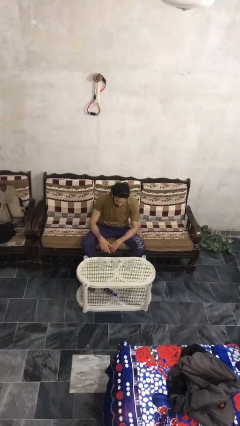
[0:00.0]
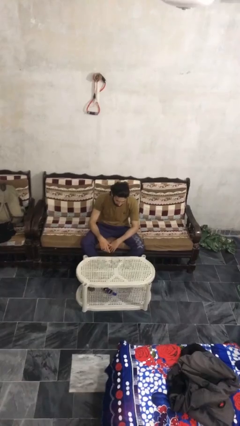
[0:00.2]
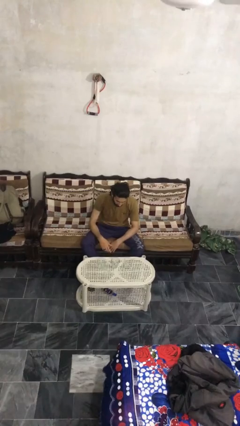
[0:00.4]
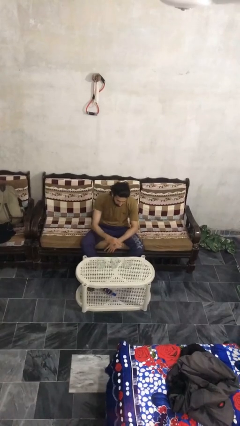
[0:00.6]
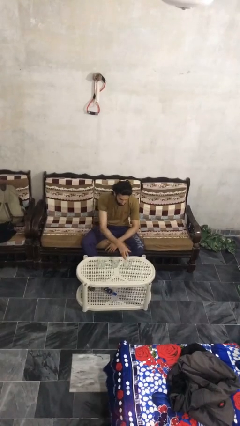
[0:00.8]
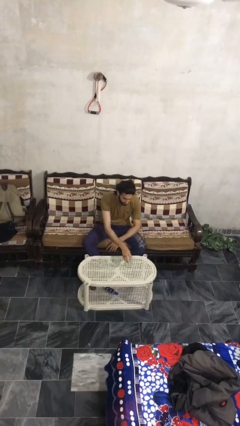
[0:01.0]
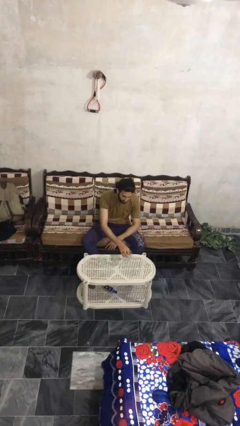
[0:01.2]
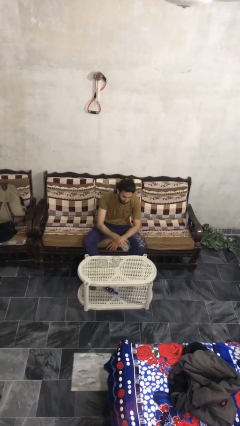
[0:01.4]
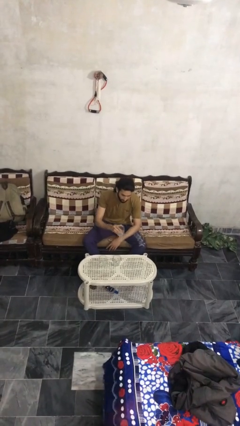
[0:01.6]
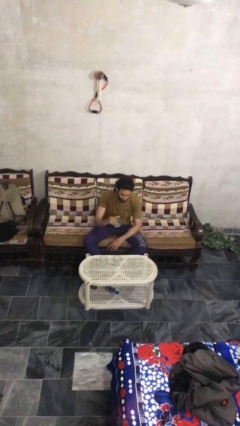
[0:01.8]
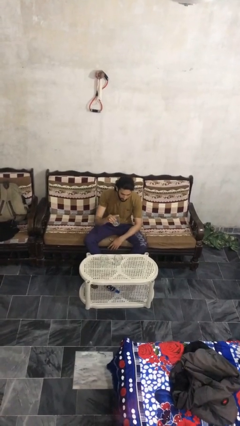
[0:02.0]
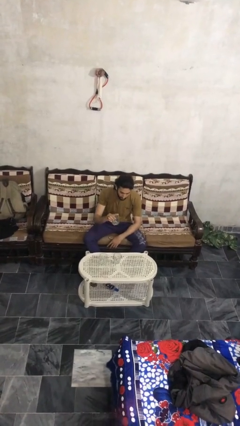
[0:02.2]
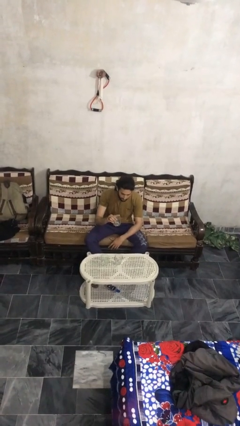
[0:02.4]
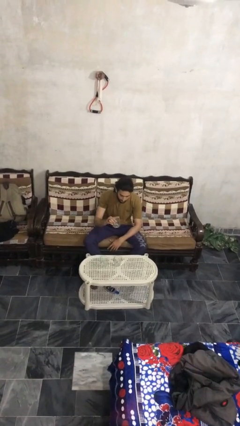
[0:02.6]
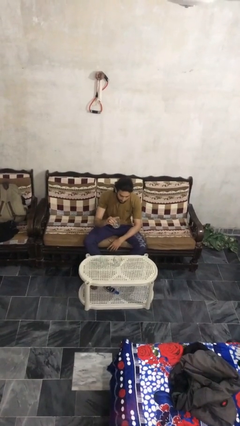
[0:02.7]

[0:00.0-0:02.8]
person picks up object from table

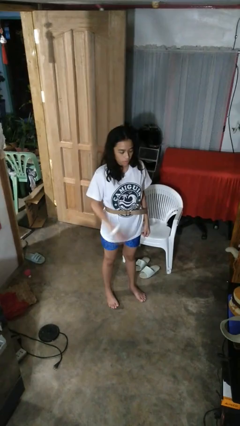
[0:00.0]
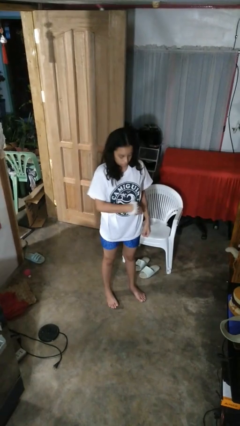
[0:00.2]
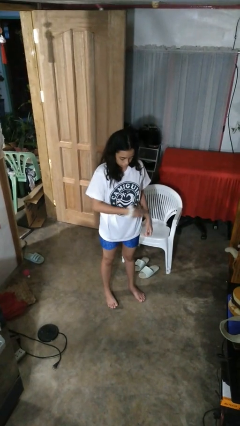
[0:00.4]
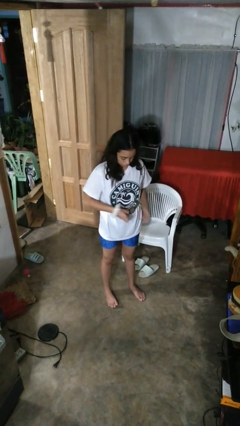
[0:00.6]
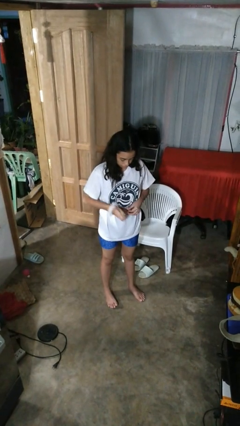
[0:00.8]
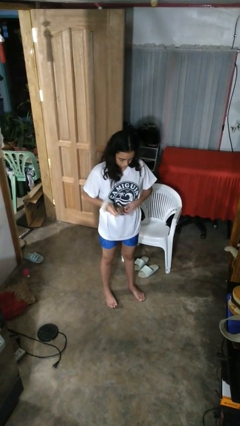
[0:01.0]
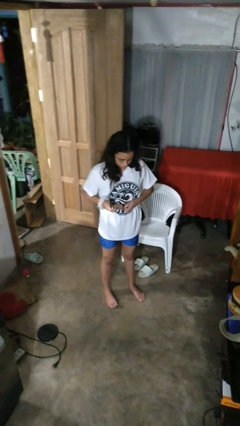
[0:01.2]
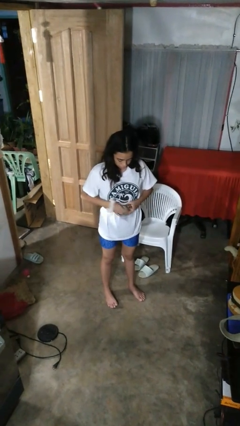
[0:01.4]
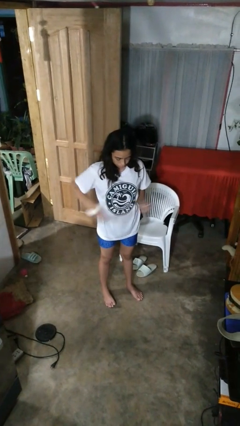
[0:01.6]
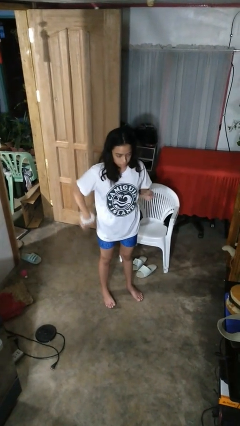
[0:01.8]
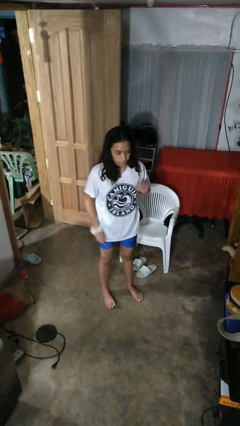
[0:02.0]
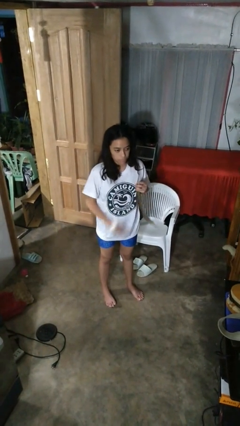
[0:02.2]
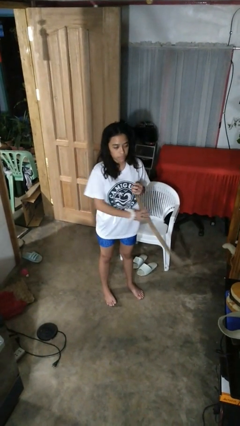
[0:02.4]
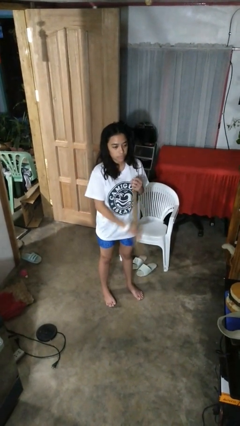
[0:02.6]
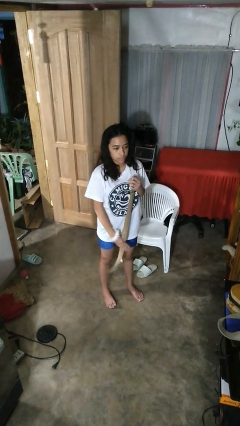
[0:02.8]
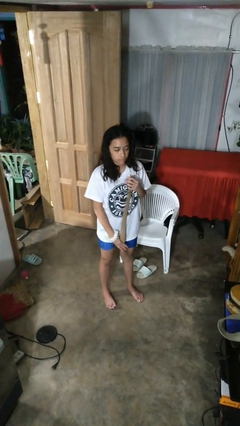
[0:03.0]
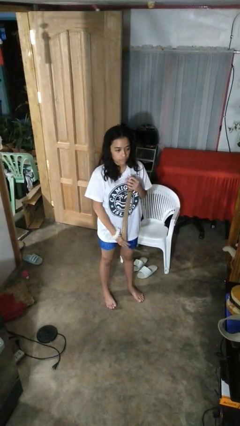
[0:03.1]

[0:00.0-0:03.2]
person takes off belt

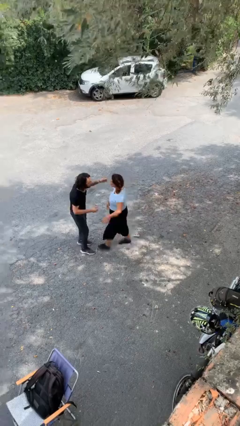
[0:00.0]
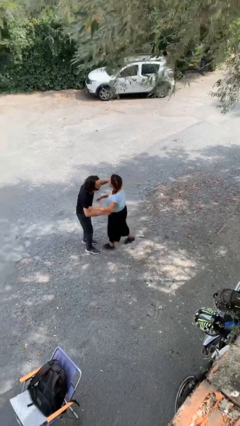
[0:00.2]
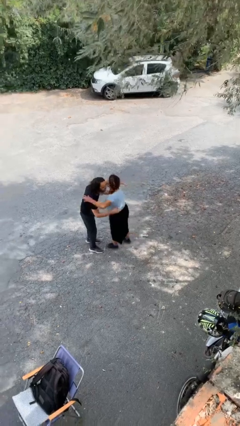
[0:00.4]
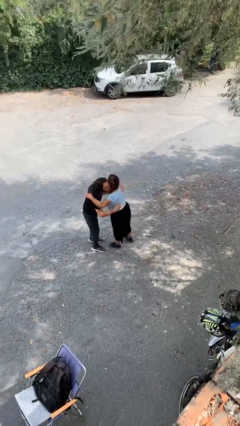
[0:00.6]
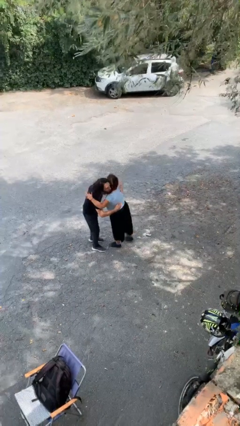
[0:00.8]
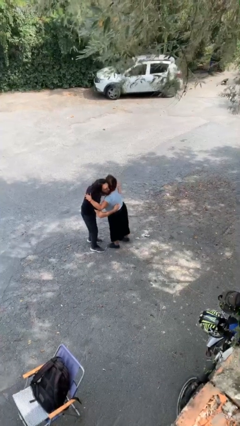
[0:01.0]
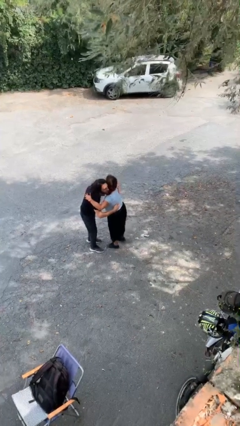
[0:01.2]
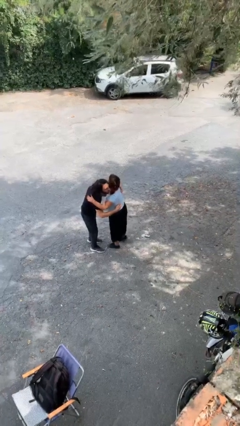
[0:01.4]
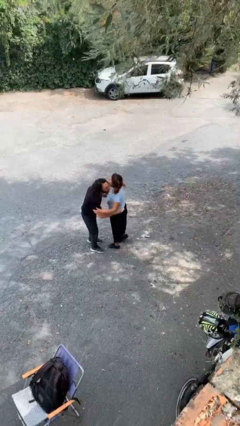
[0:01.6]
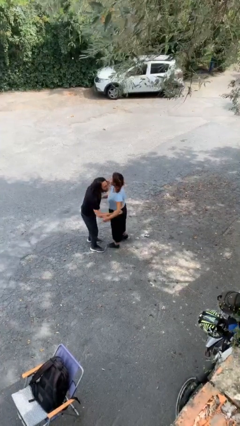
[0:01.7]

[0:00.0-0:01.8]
person embraces person

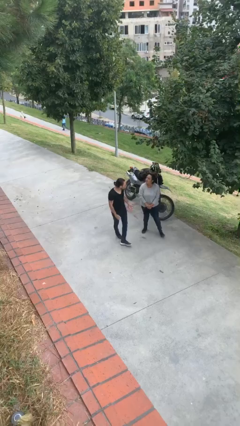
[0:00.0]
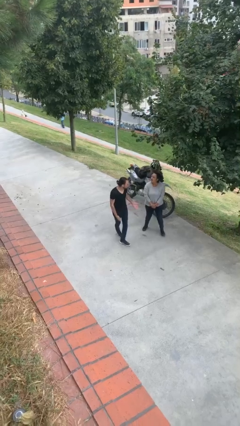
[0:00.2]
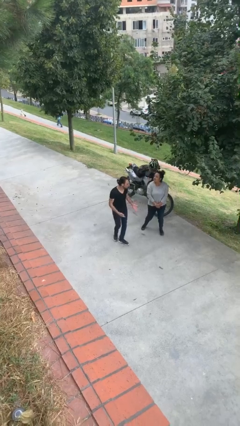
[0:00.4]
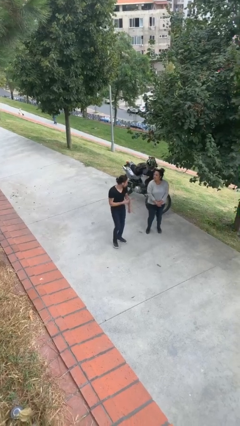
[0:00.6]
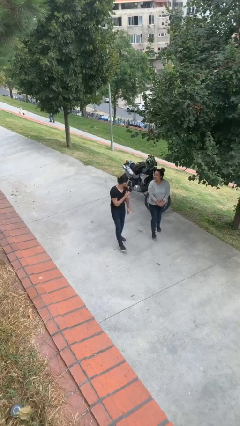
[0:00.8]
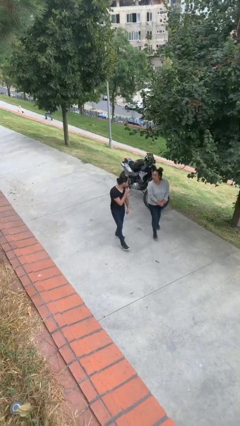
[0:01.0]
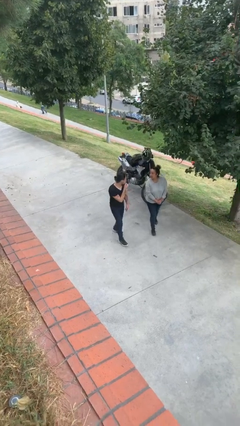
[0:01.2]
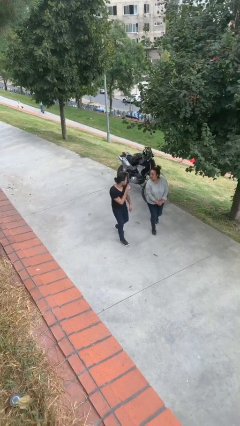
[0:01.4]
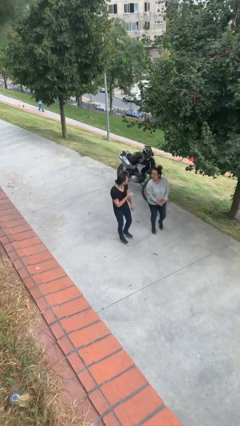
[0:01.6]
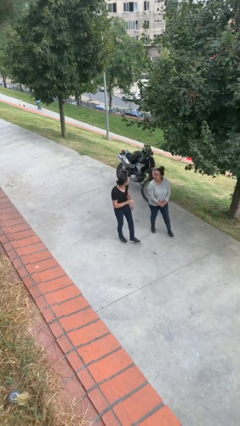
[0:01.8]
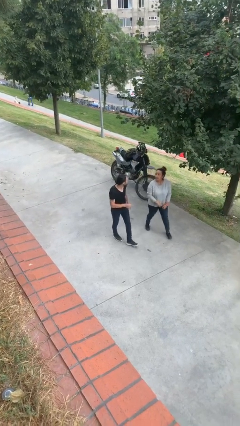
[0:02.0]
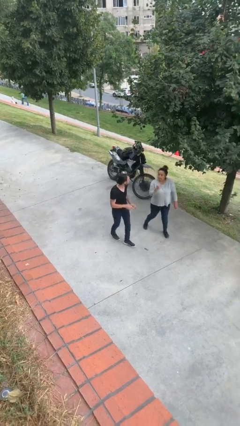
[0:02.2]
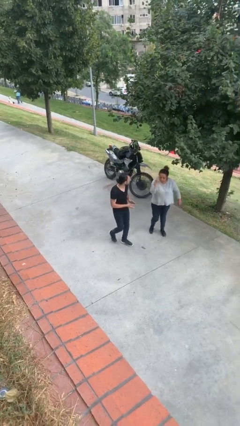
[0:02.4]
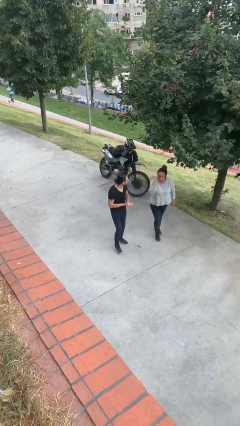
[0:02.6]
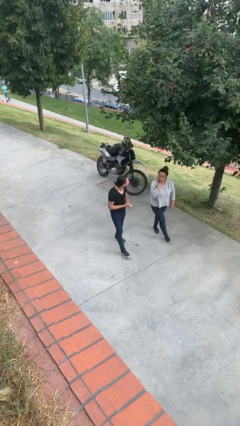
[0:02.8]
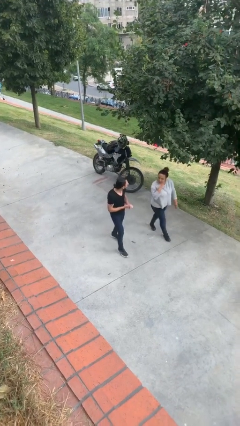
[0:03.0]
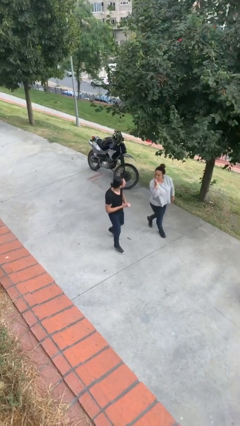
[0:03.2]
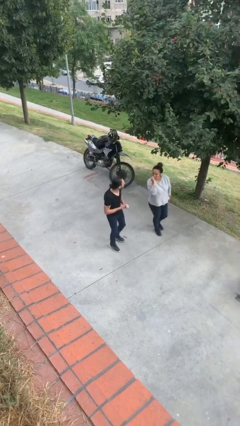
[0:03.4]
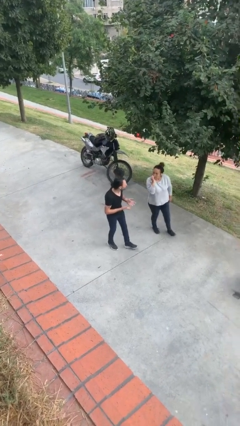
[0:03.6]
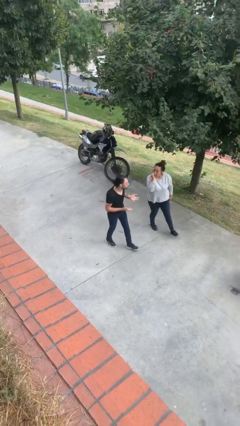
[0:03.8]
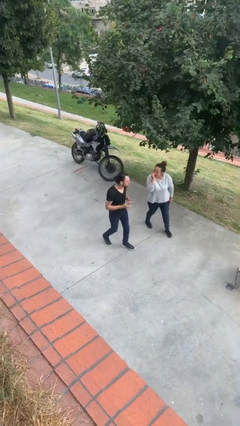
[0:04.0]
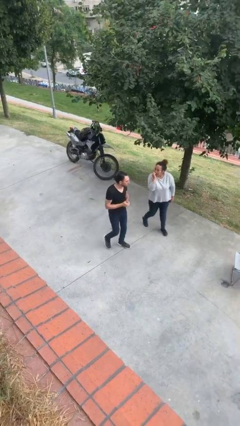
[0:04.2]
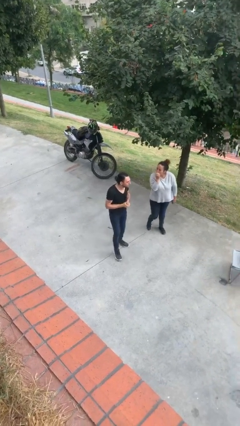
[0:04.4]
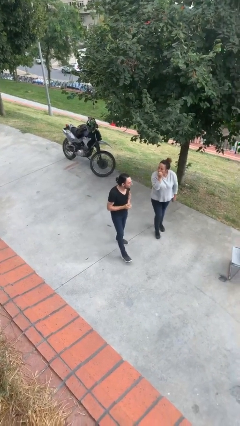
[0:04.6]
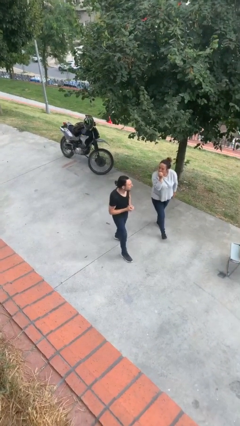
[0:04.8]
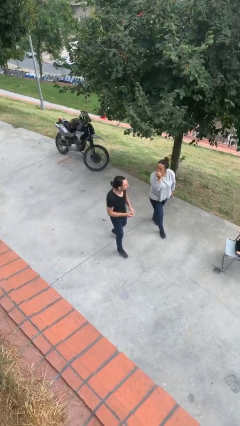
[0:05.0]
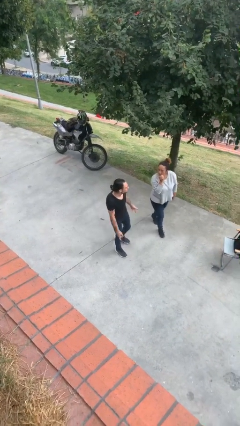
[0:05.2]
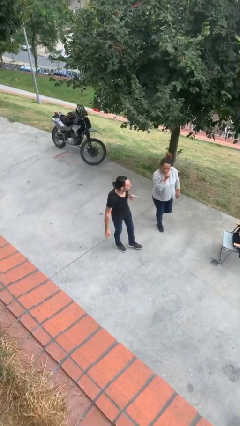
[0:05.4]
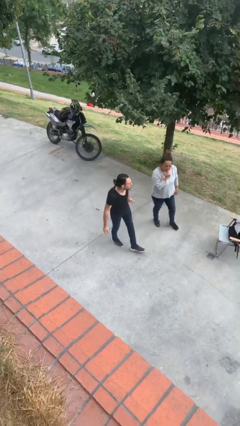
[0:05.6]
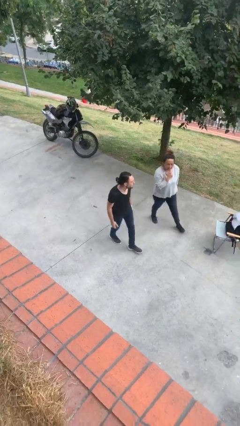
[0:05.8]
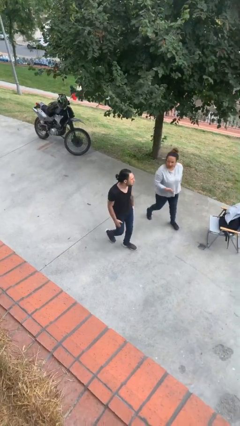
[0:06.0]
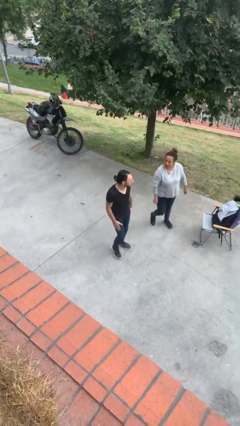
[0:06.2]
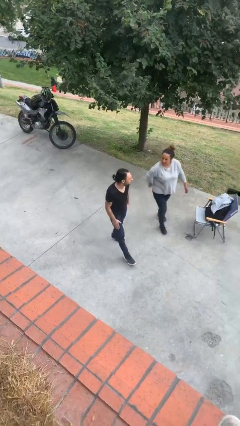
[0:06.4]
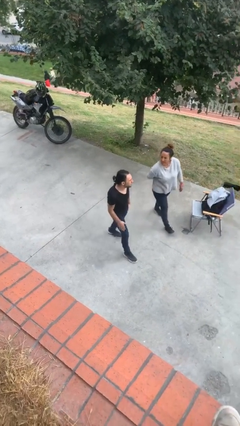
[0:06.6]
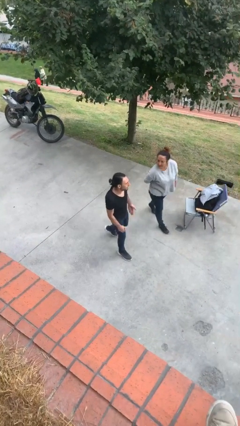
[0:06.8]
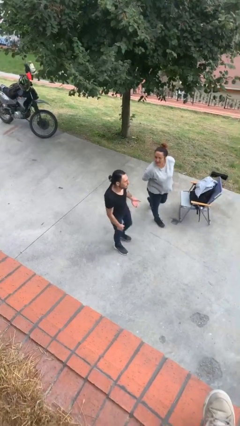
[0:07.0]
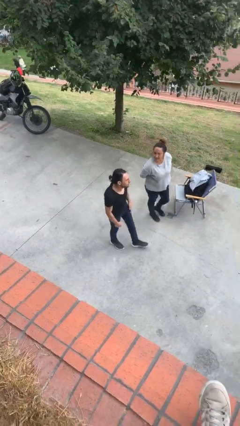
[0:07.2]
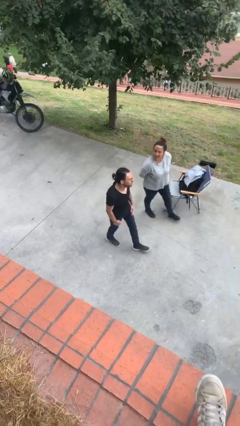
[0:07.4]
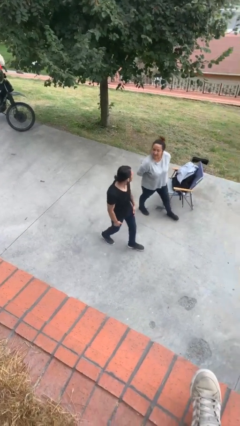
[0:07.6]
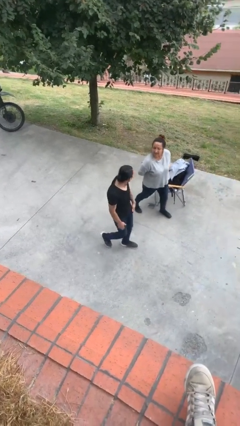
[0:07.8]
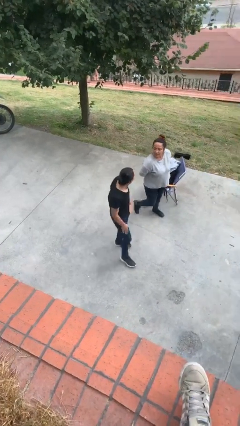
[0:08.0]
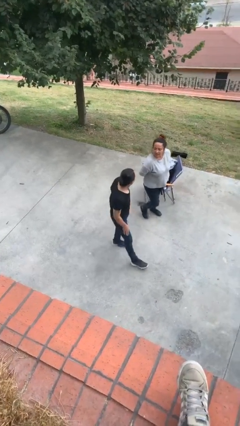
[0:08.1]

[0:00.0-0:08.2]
person talks to person

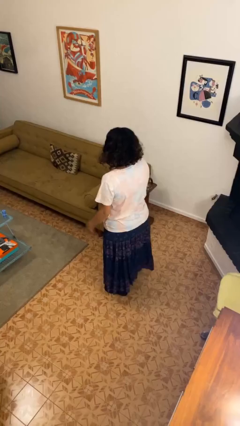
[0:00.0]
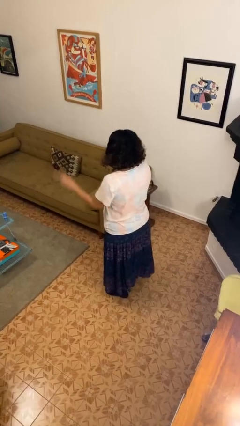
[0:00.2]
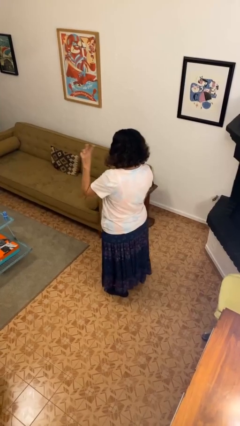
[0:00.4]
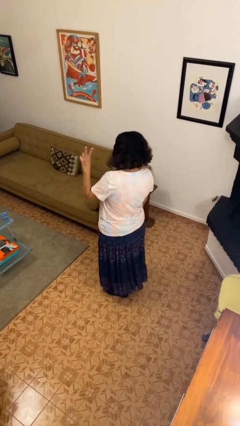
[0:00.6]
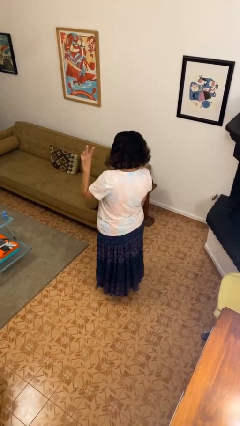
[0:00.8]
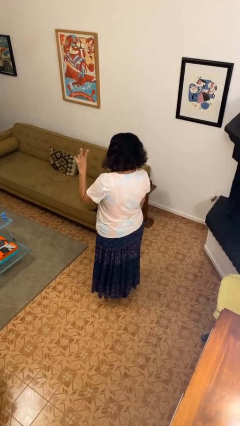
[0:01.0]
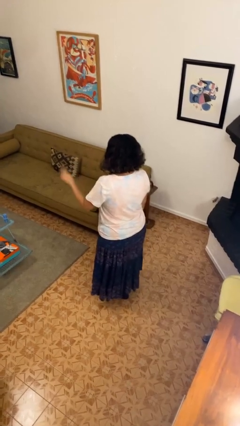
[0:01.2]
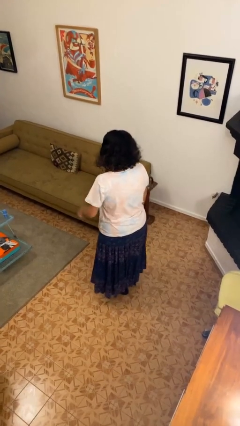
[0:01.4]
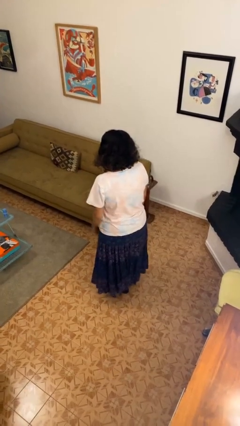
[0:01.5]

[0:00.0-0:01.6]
person gestures peace
